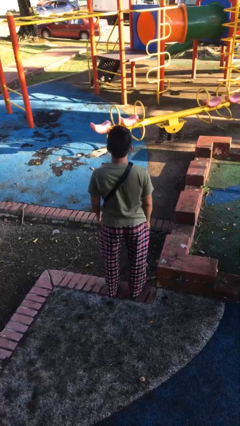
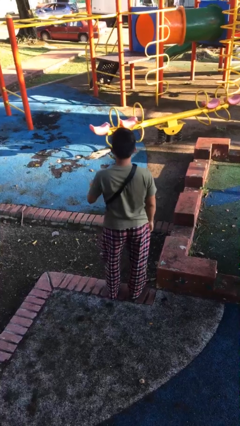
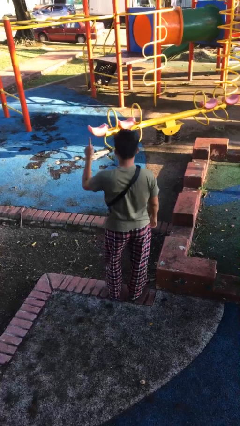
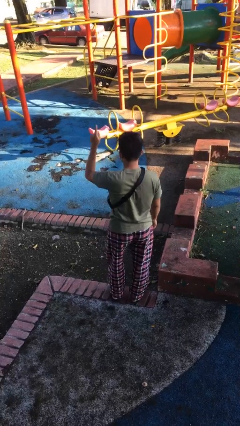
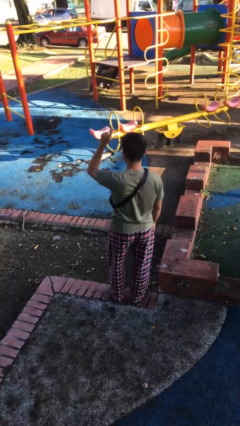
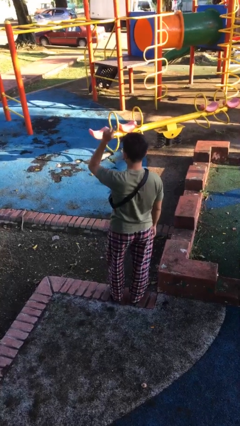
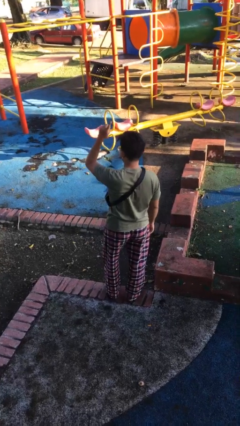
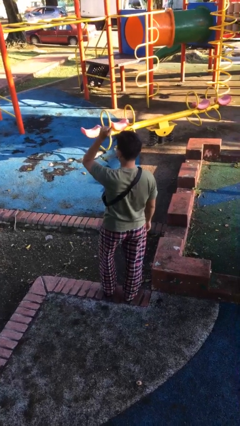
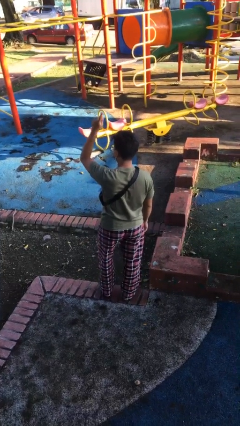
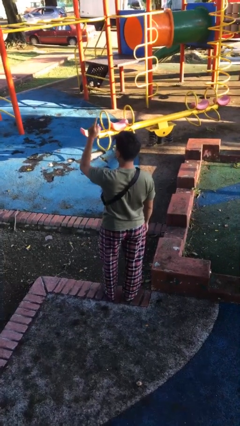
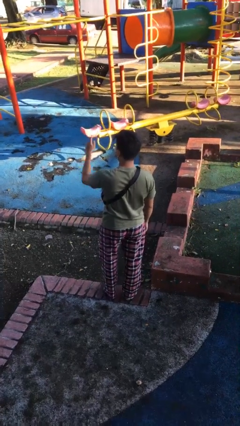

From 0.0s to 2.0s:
person gestures number one

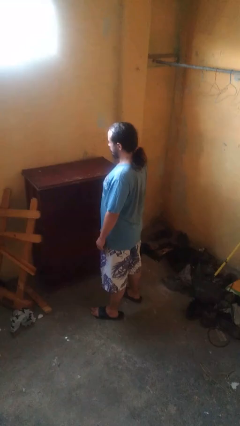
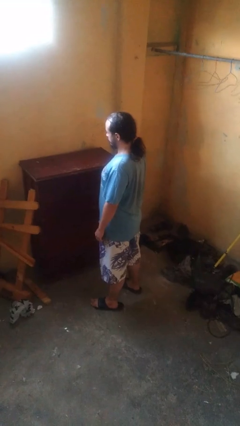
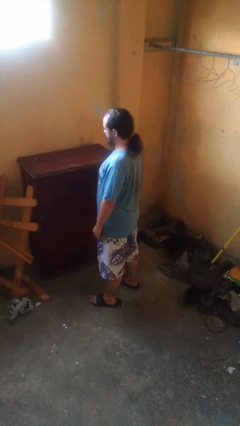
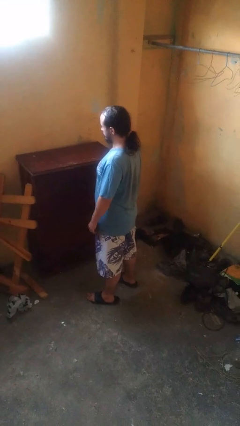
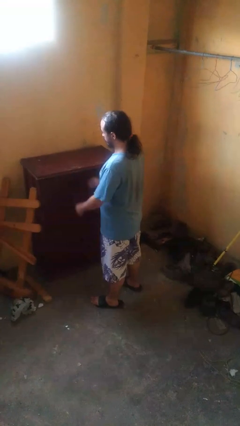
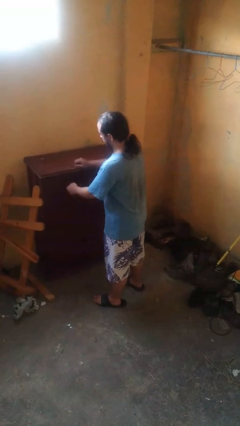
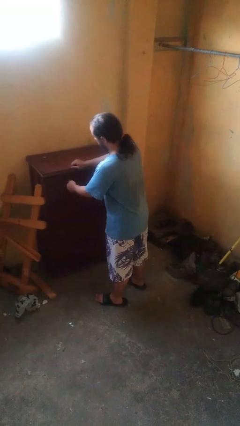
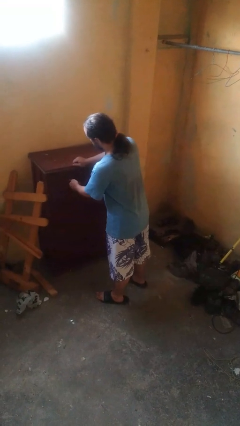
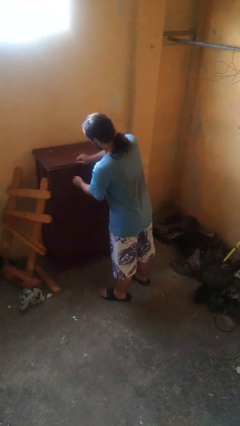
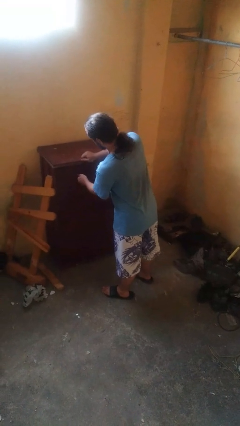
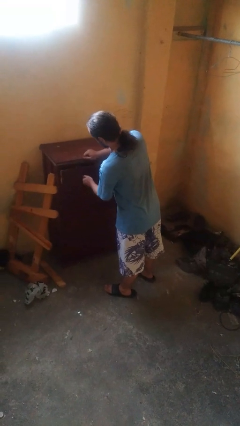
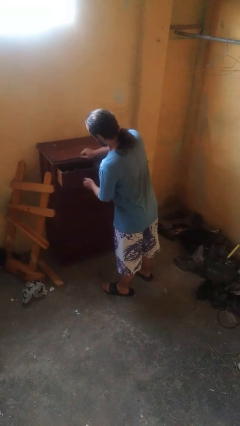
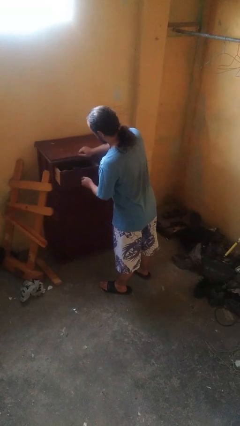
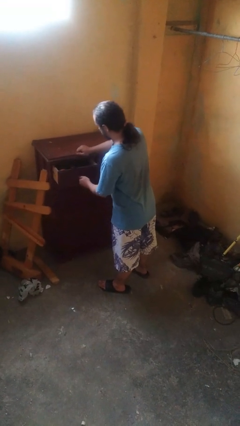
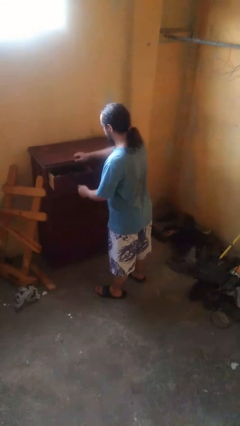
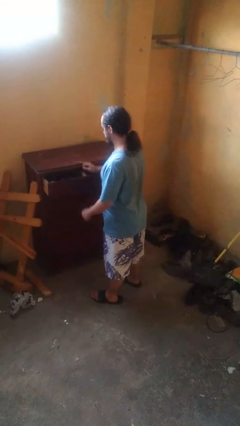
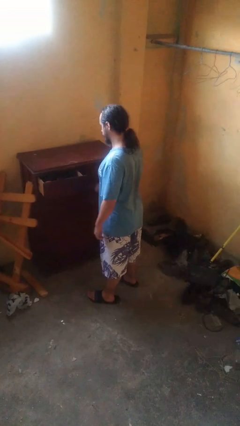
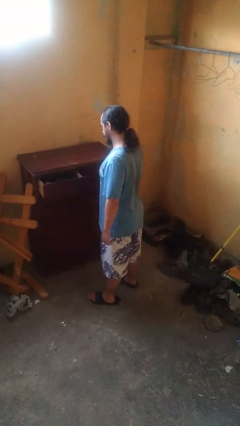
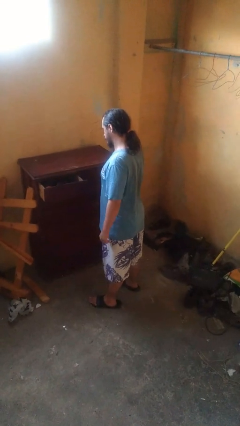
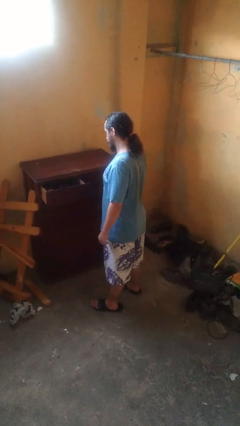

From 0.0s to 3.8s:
person opens dresser drawer

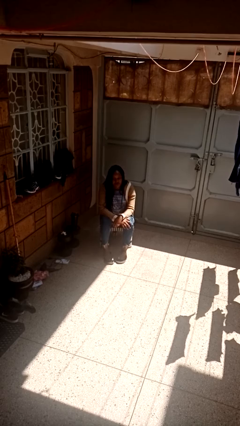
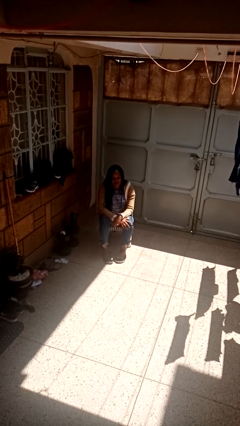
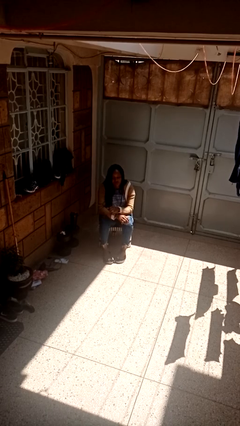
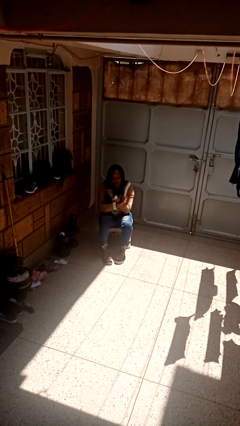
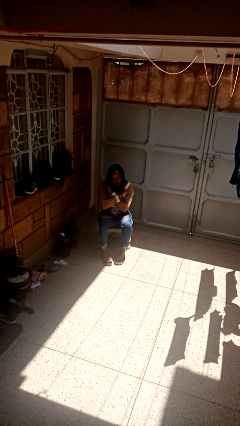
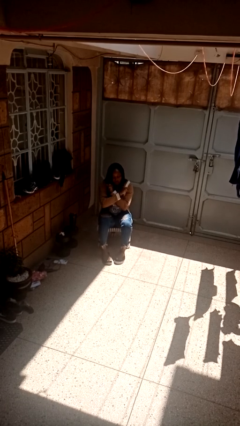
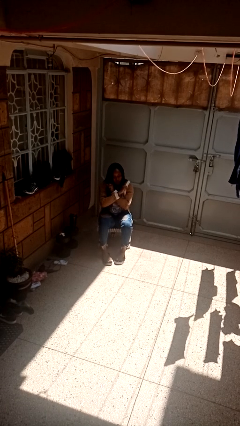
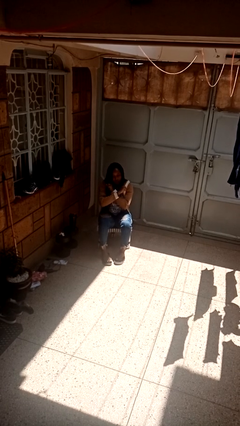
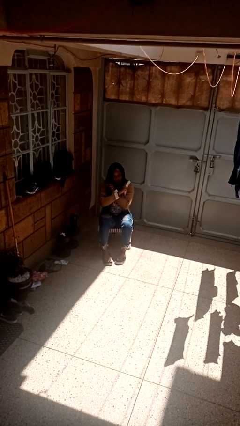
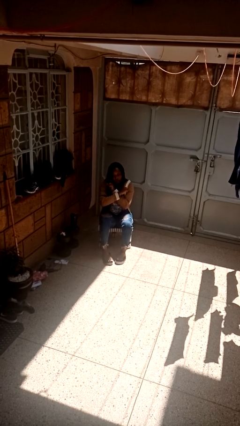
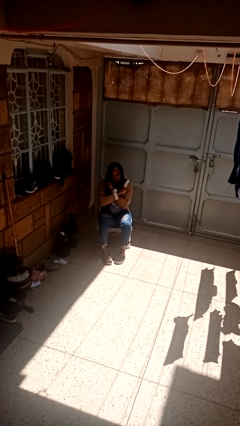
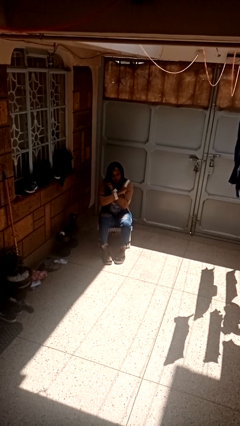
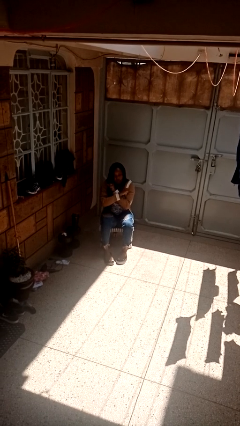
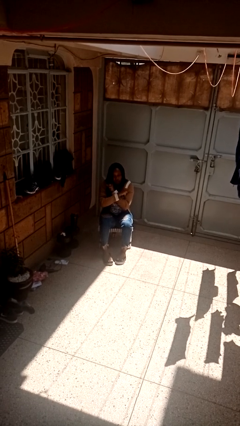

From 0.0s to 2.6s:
person gestures arms x

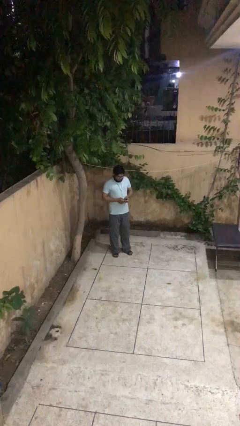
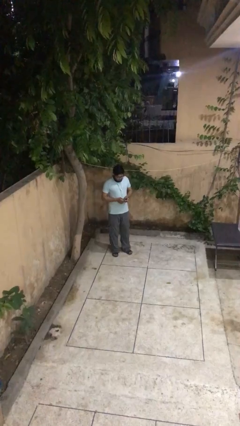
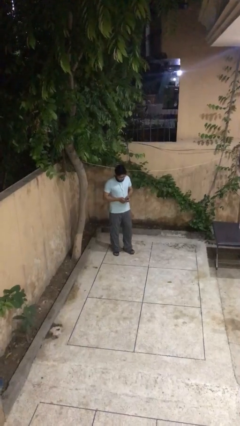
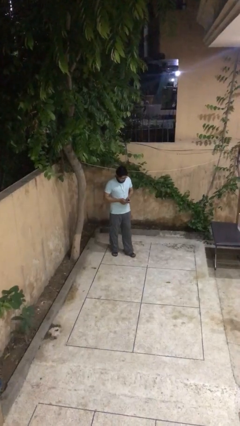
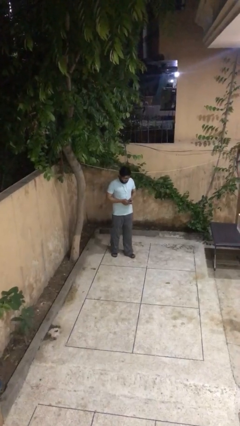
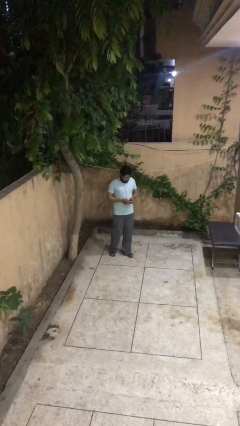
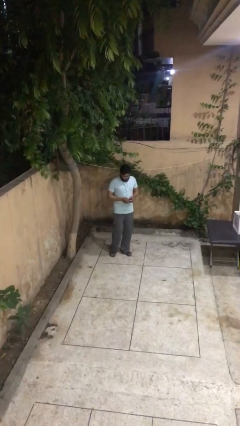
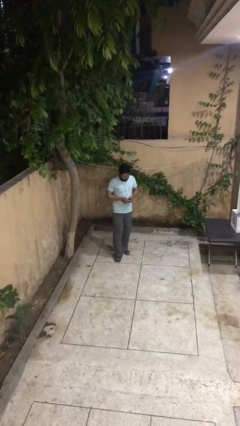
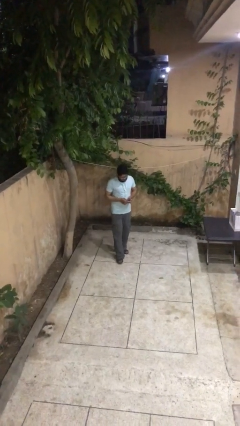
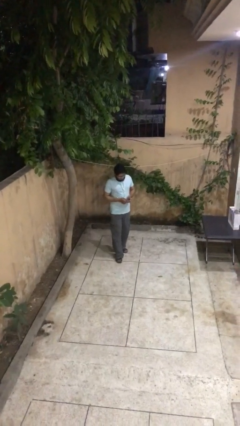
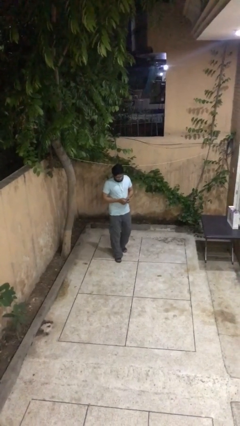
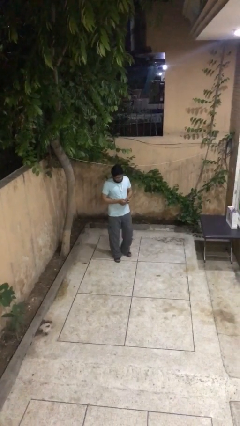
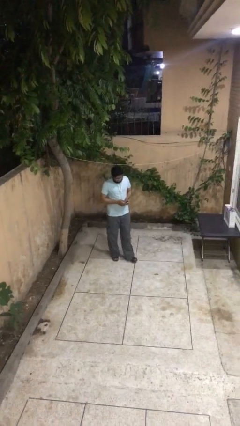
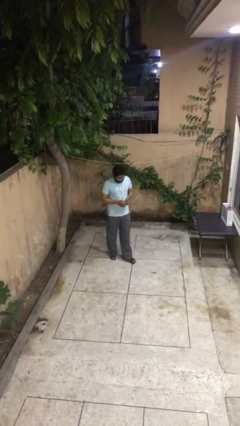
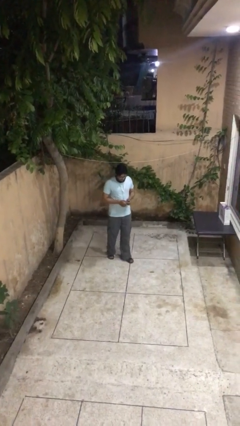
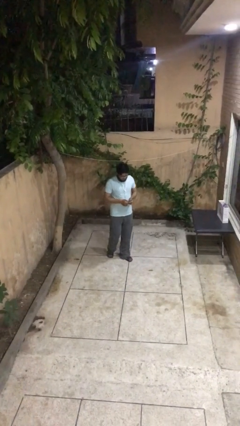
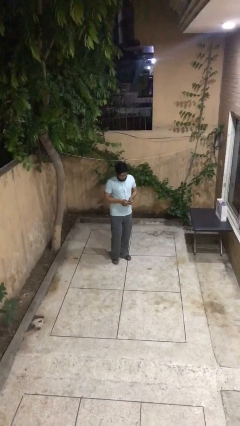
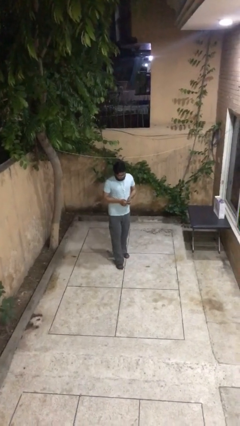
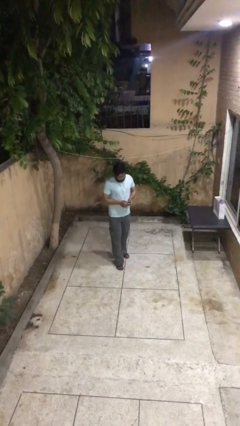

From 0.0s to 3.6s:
person texts on phone

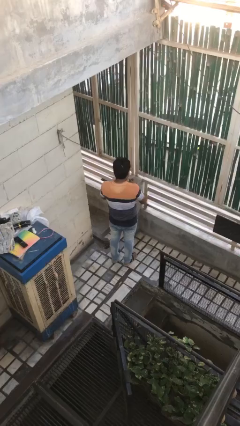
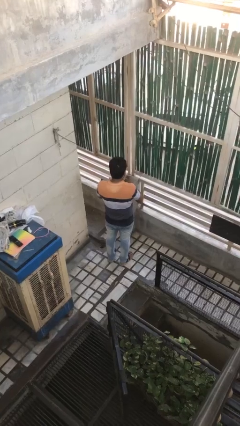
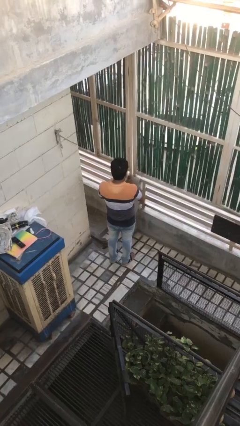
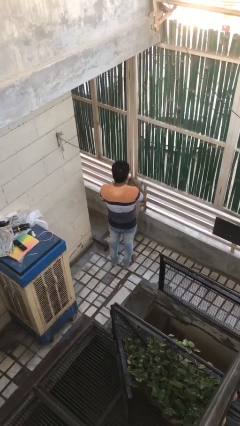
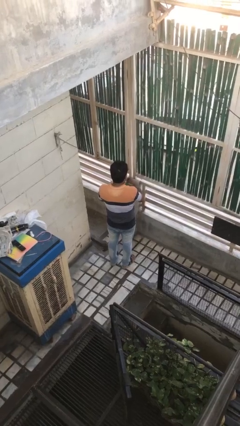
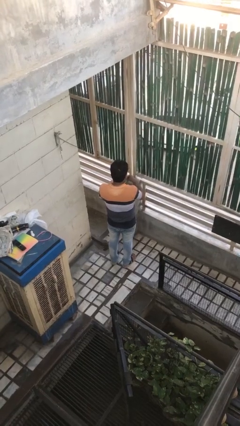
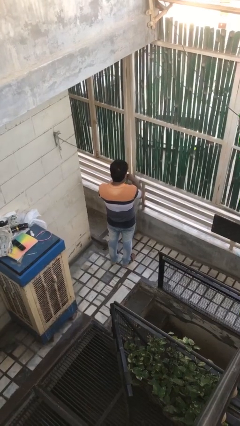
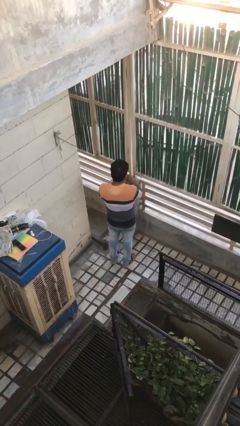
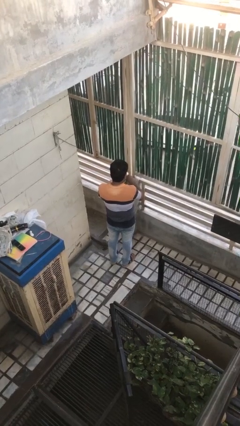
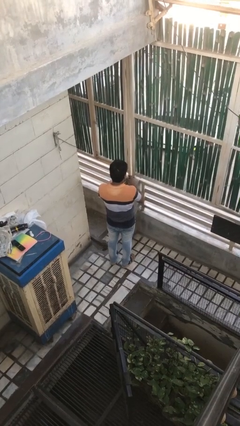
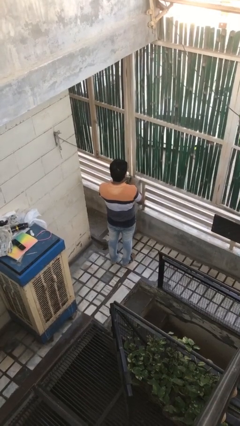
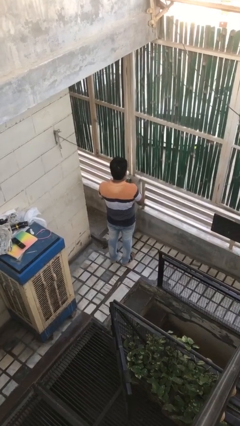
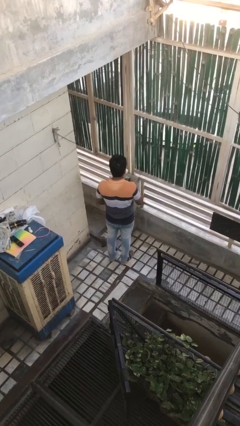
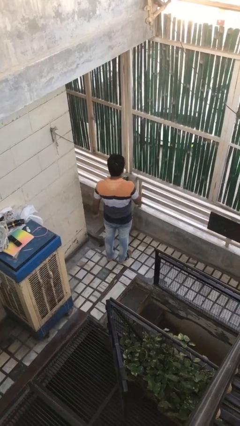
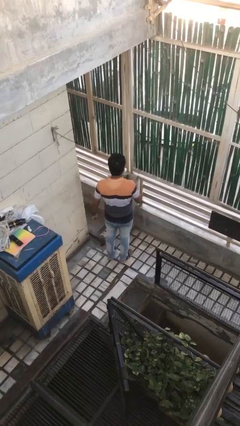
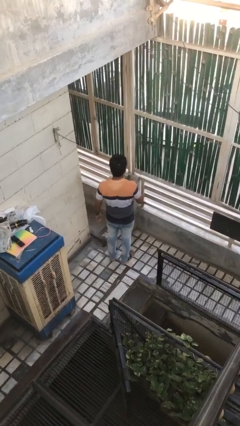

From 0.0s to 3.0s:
person opens beverage can

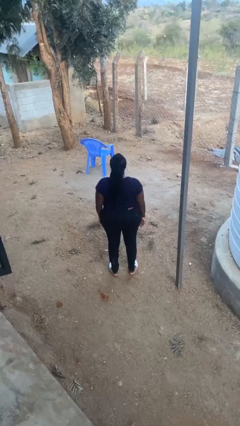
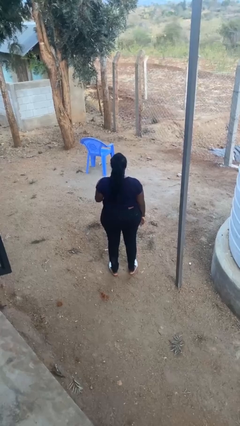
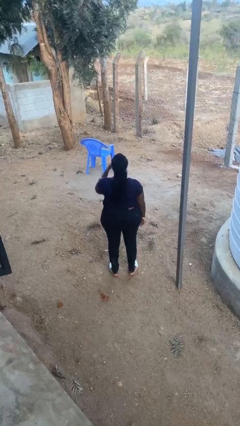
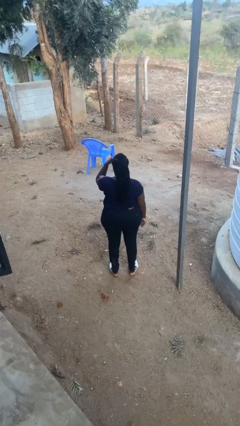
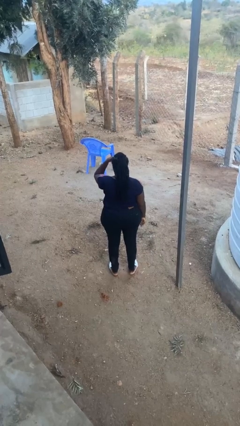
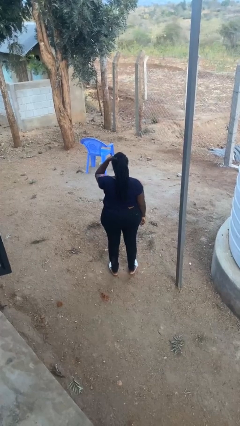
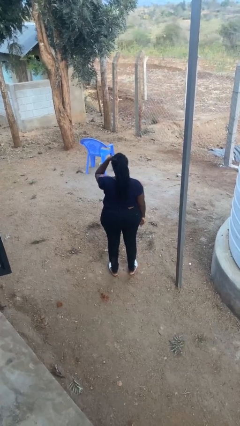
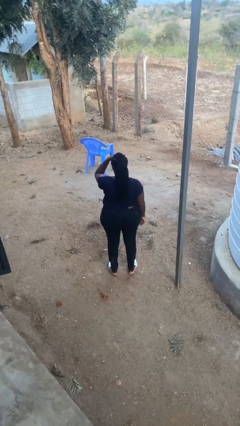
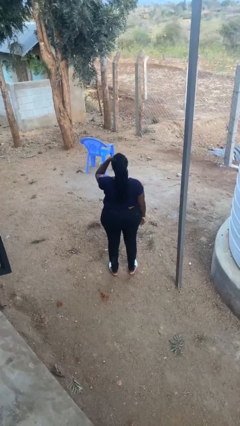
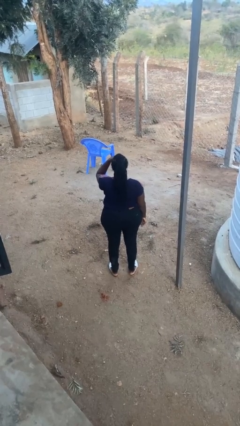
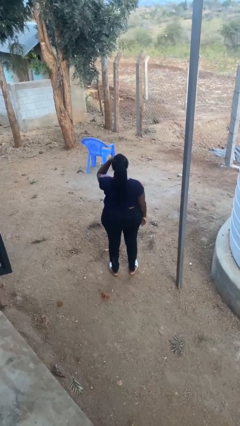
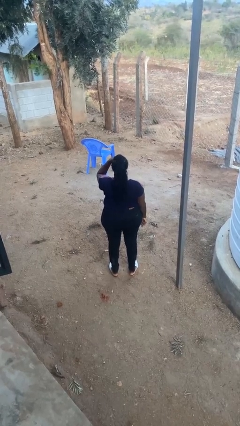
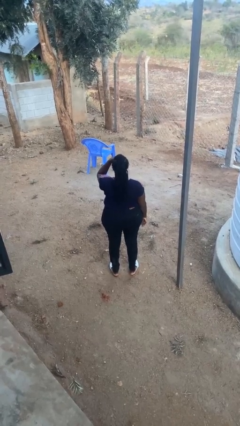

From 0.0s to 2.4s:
person shades eyes

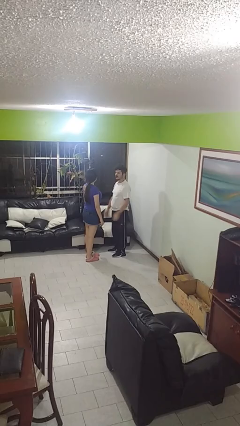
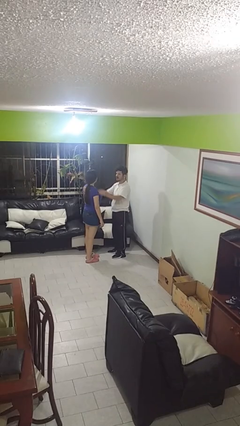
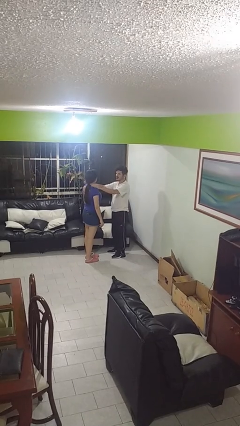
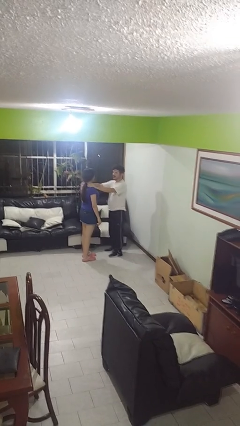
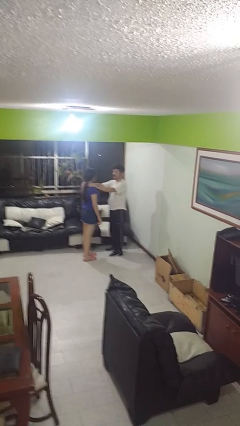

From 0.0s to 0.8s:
person grabs person by shoulder
